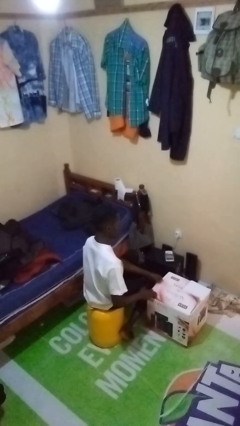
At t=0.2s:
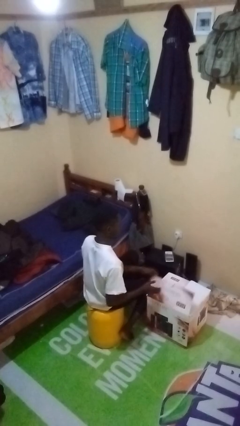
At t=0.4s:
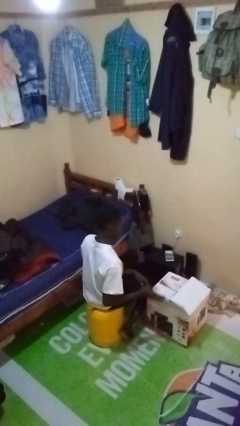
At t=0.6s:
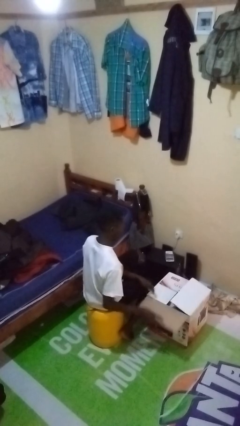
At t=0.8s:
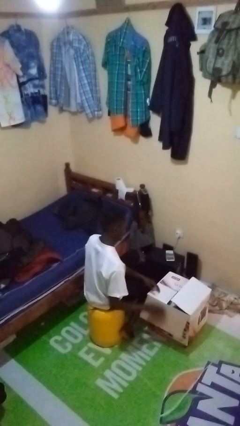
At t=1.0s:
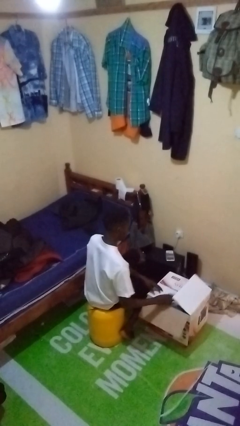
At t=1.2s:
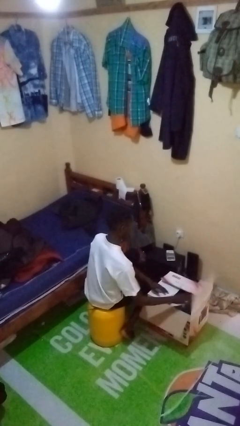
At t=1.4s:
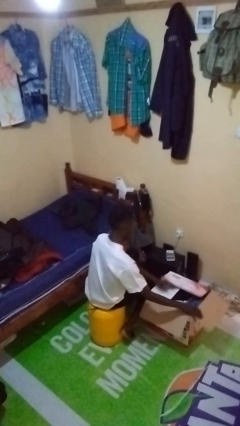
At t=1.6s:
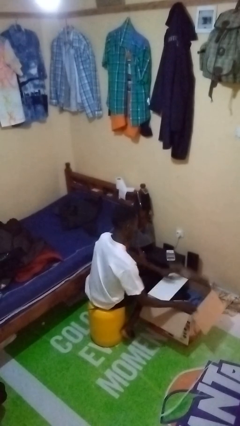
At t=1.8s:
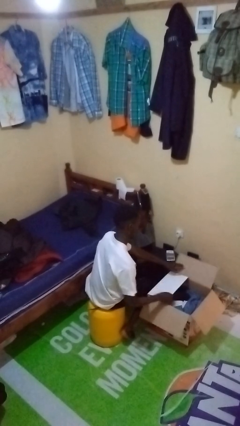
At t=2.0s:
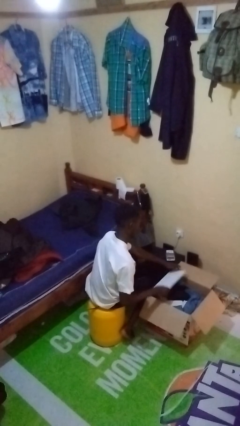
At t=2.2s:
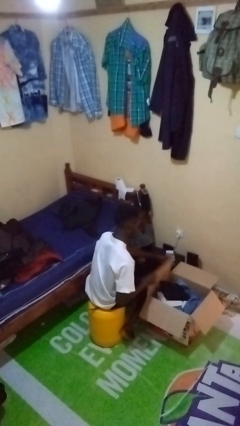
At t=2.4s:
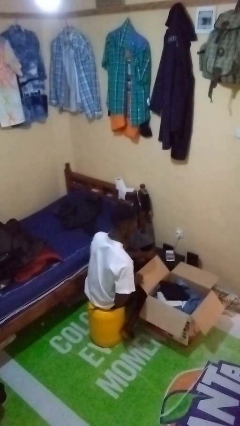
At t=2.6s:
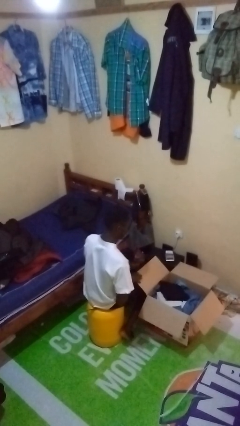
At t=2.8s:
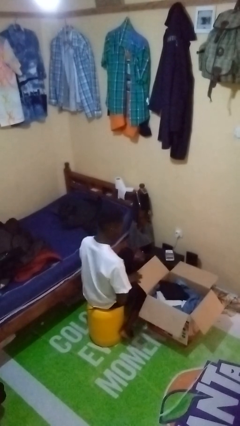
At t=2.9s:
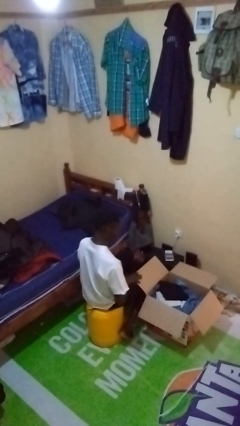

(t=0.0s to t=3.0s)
person opens box

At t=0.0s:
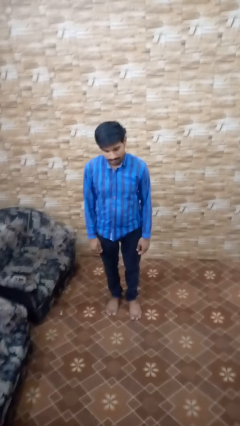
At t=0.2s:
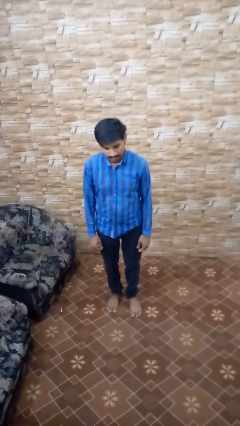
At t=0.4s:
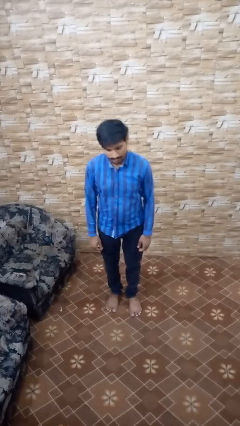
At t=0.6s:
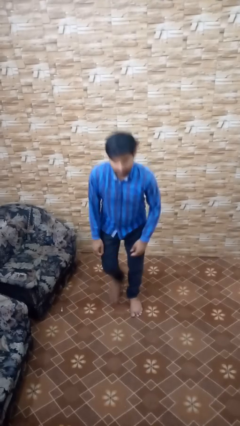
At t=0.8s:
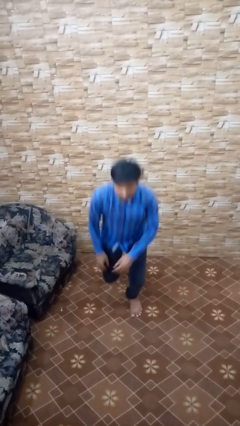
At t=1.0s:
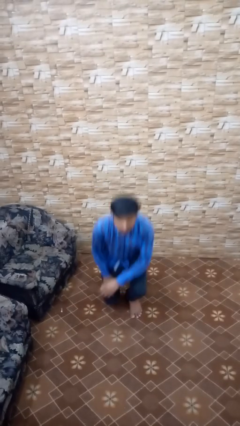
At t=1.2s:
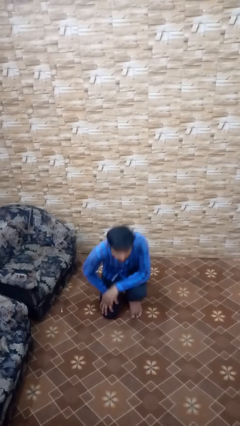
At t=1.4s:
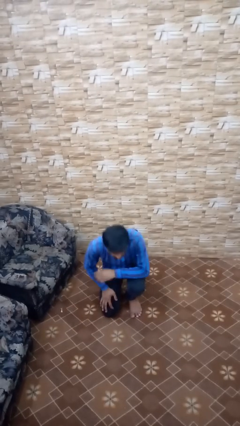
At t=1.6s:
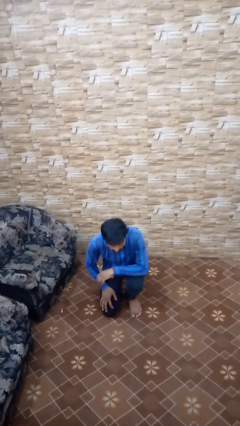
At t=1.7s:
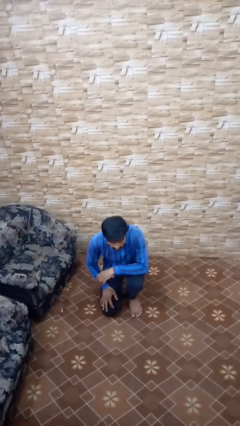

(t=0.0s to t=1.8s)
person kneels

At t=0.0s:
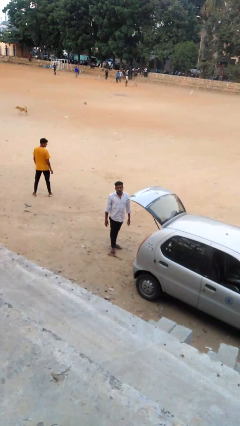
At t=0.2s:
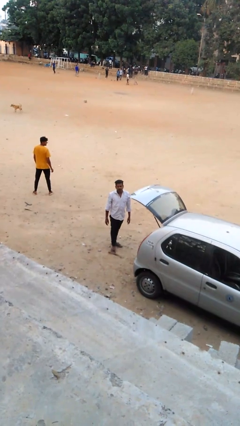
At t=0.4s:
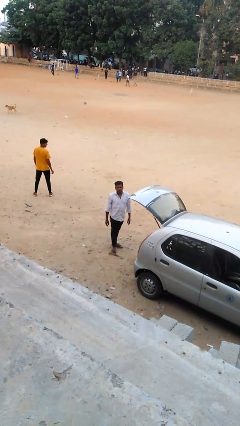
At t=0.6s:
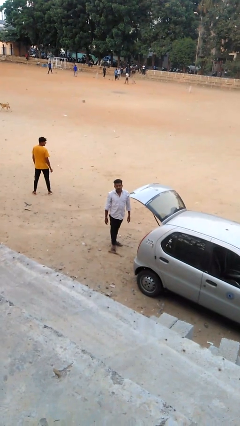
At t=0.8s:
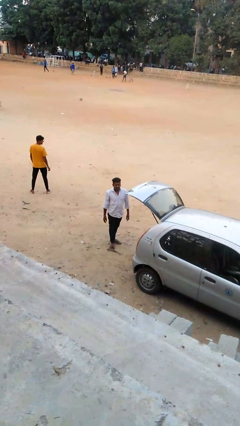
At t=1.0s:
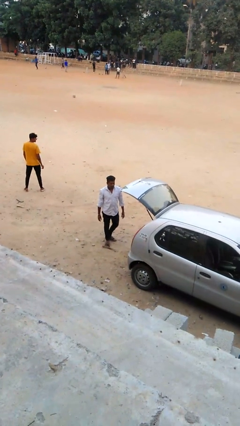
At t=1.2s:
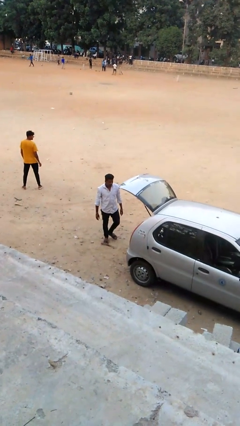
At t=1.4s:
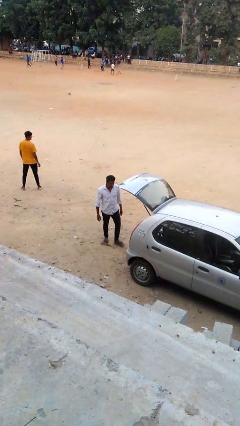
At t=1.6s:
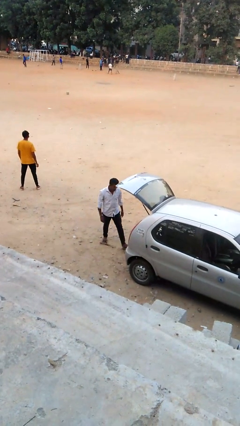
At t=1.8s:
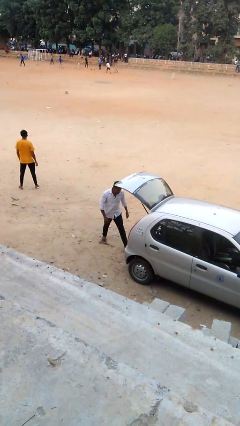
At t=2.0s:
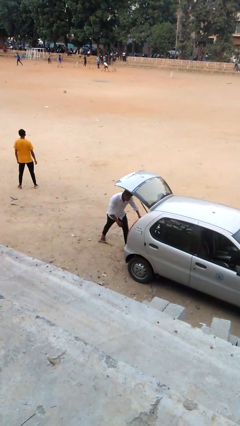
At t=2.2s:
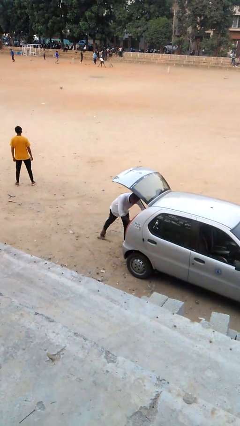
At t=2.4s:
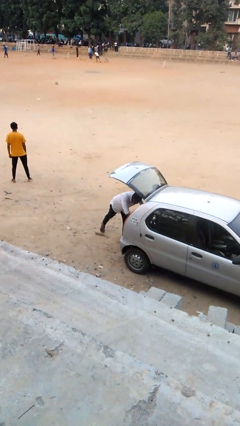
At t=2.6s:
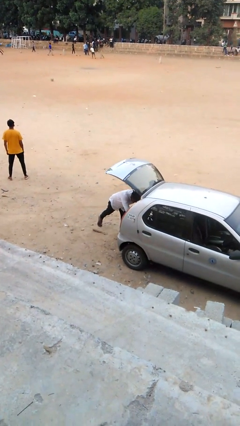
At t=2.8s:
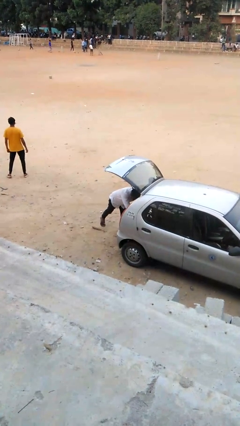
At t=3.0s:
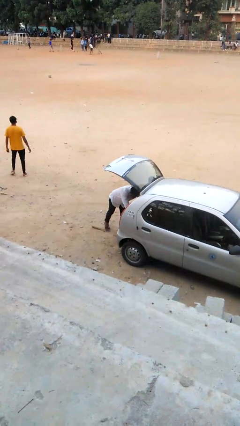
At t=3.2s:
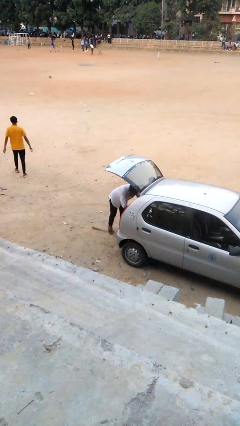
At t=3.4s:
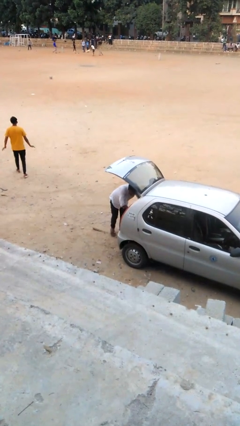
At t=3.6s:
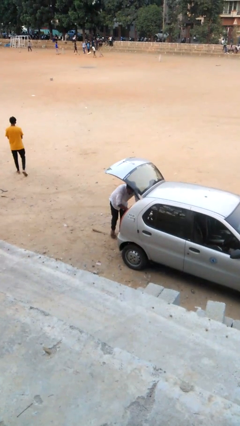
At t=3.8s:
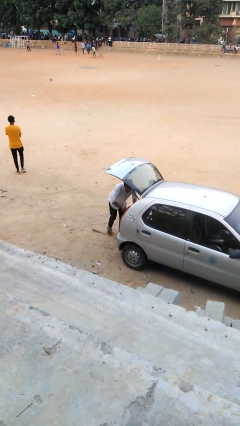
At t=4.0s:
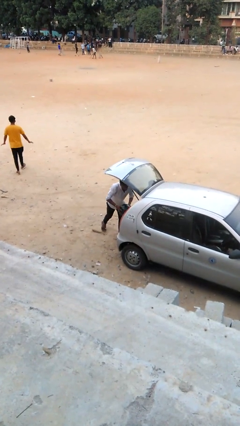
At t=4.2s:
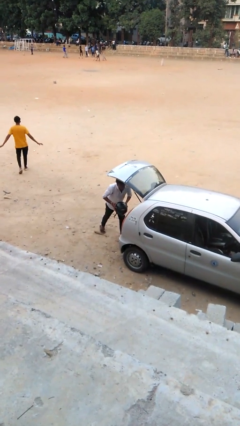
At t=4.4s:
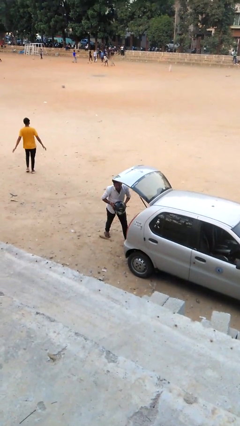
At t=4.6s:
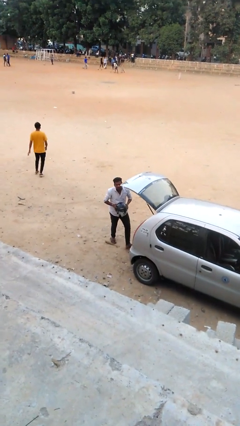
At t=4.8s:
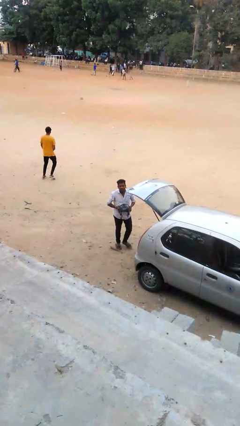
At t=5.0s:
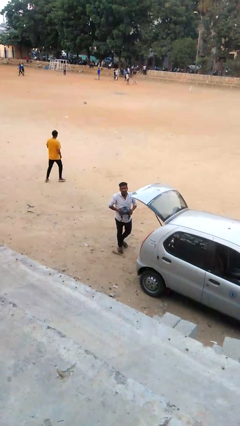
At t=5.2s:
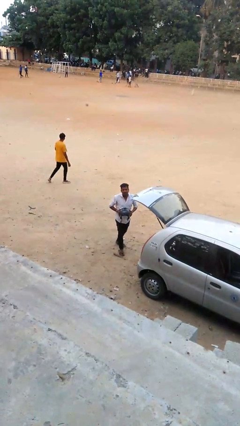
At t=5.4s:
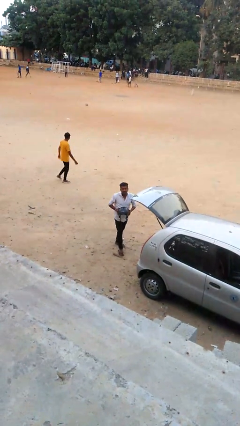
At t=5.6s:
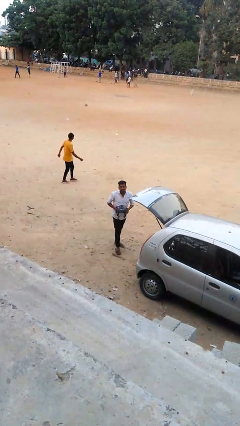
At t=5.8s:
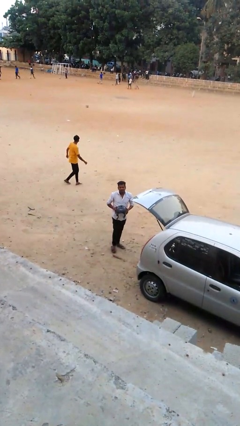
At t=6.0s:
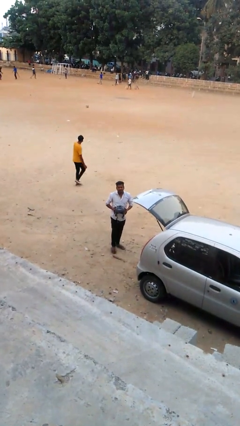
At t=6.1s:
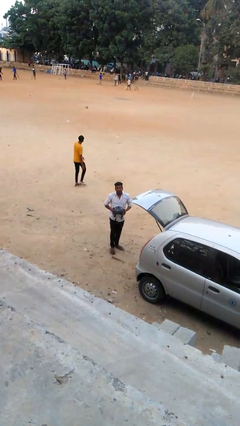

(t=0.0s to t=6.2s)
person unloads car

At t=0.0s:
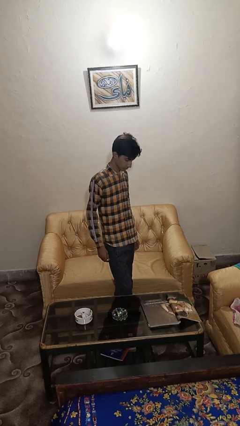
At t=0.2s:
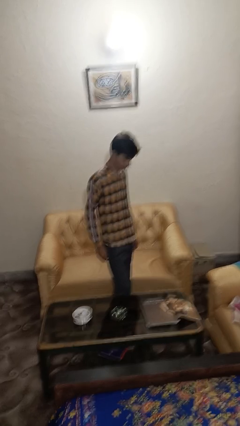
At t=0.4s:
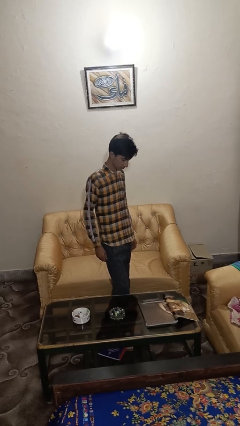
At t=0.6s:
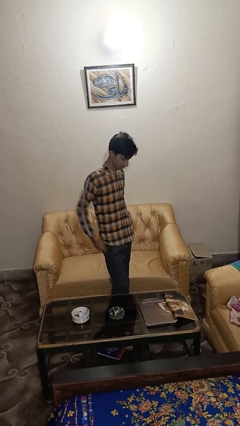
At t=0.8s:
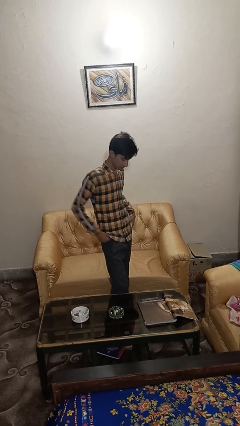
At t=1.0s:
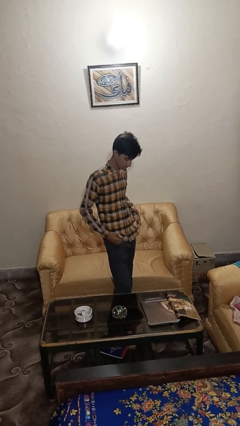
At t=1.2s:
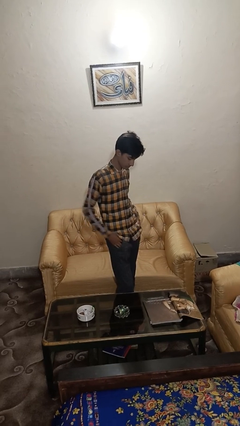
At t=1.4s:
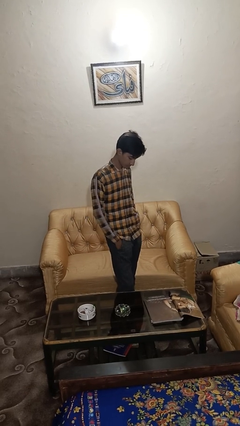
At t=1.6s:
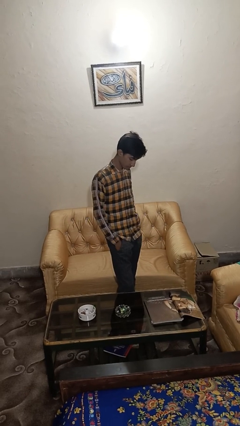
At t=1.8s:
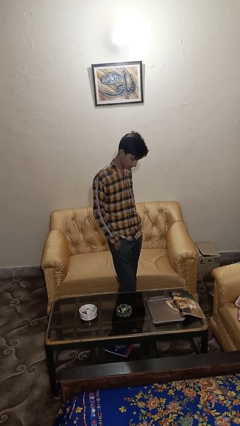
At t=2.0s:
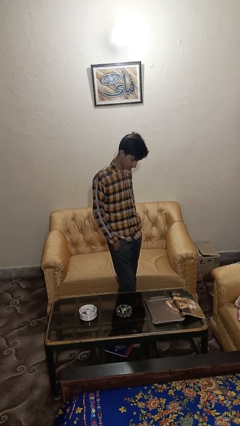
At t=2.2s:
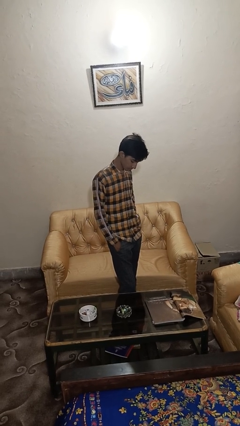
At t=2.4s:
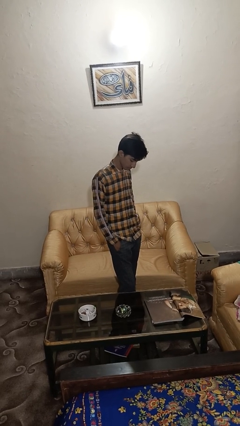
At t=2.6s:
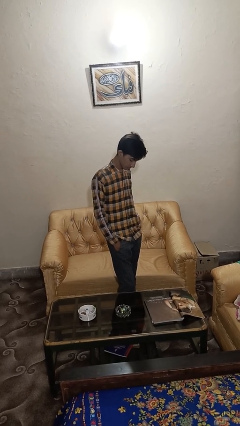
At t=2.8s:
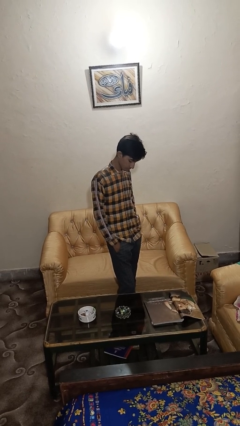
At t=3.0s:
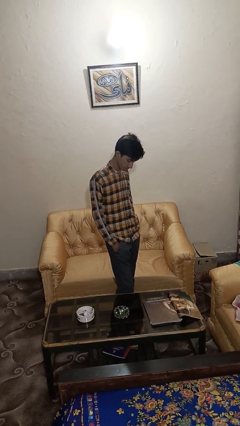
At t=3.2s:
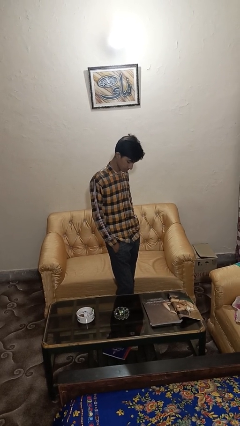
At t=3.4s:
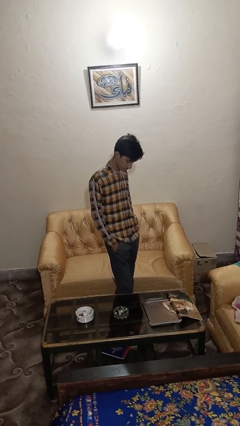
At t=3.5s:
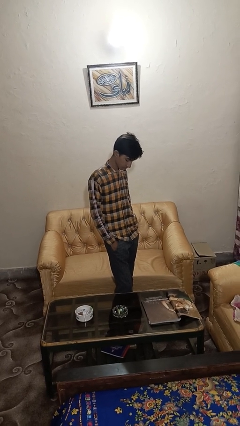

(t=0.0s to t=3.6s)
person puts hands in back pockets

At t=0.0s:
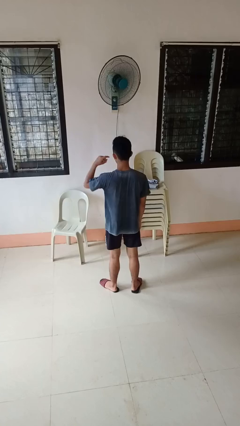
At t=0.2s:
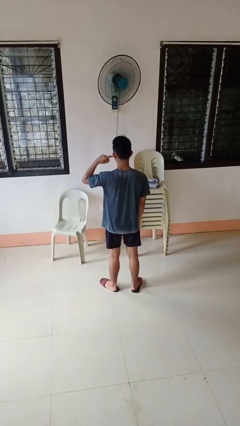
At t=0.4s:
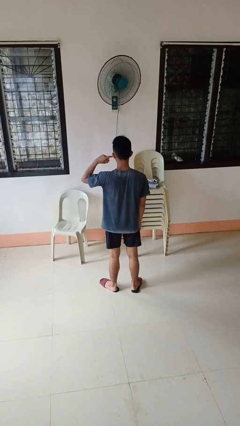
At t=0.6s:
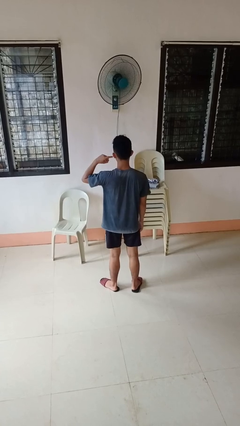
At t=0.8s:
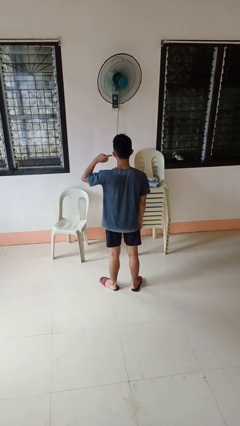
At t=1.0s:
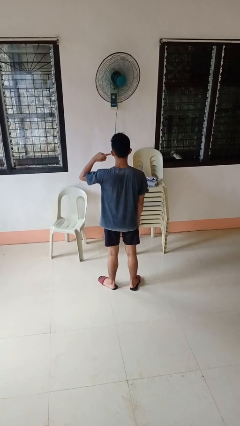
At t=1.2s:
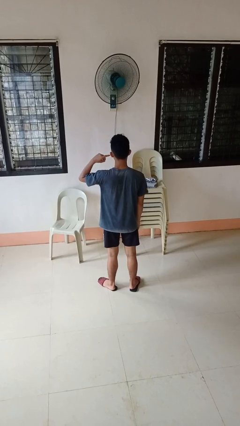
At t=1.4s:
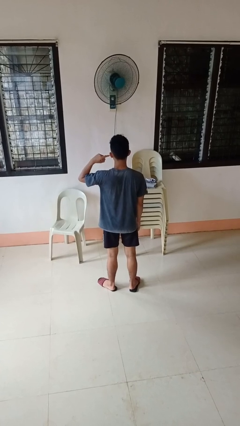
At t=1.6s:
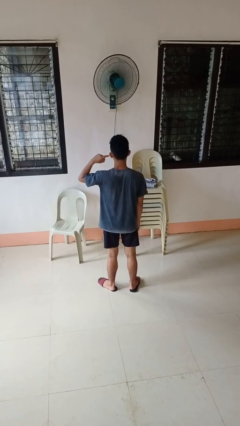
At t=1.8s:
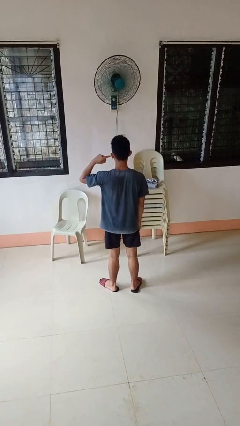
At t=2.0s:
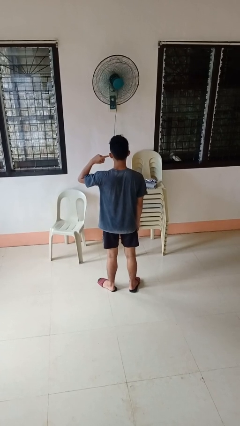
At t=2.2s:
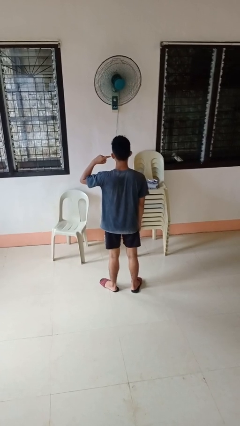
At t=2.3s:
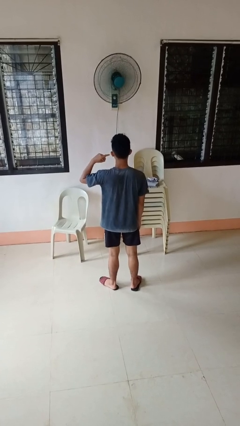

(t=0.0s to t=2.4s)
person gestures listen closely

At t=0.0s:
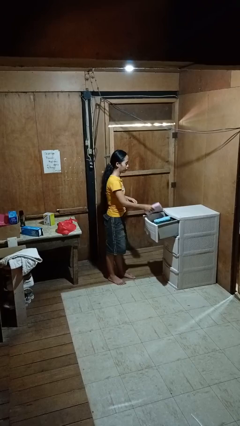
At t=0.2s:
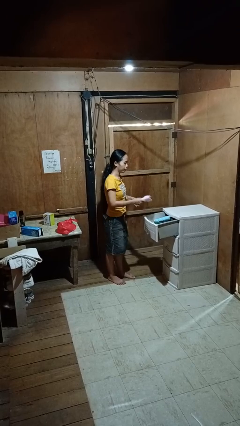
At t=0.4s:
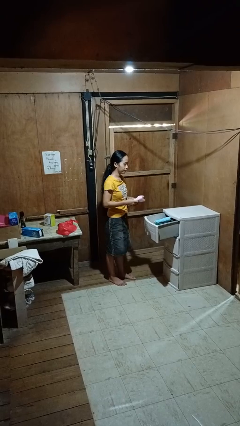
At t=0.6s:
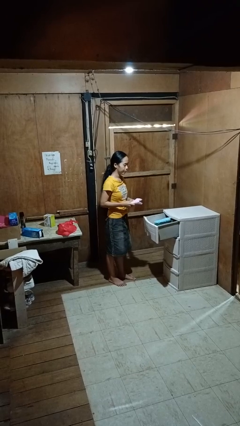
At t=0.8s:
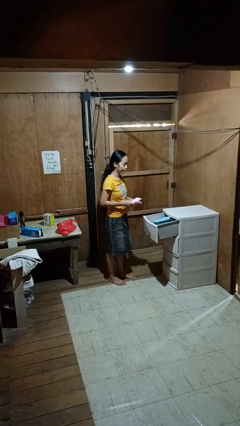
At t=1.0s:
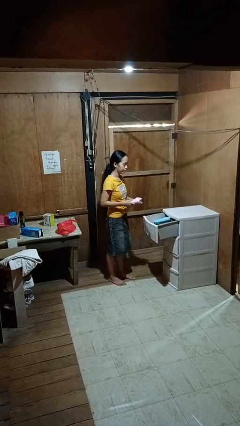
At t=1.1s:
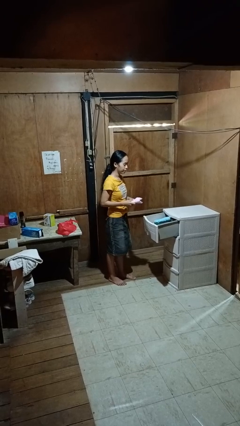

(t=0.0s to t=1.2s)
person takes clothes from dresser
